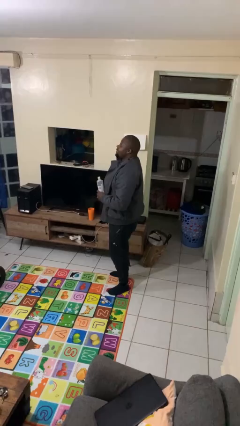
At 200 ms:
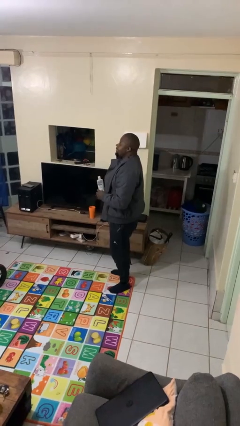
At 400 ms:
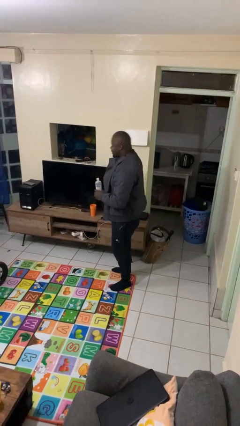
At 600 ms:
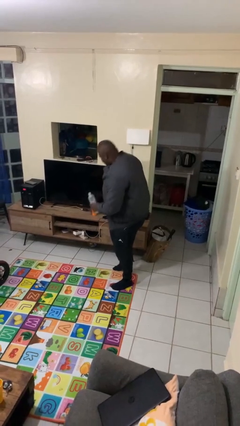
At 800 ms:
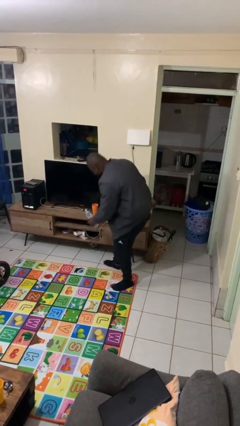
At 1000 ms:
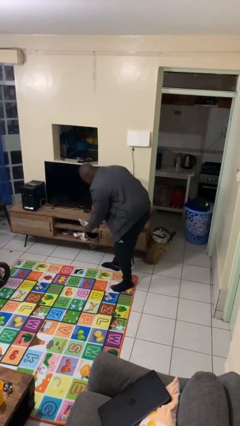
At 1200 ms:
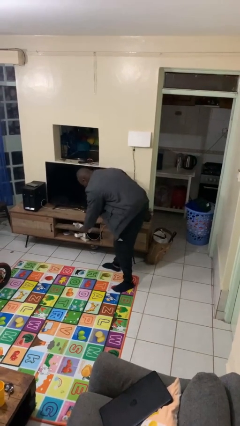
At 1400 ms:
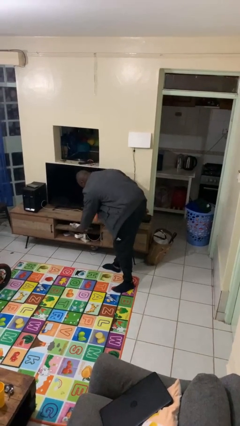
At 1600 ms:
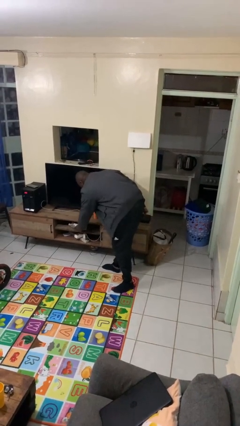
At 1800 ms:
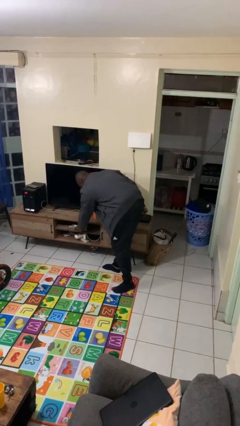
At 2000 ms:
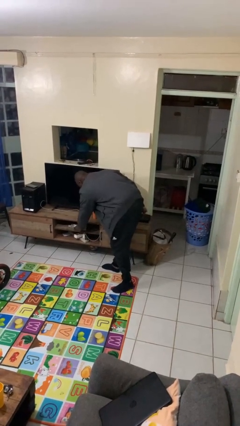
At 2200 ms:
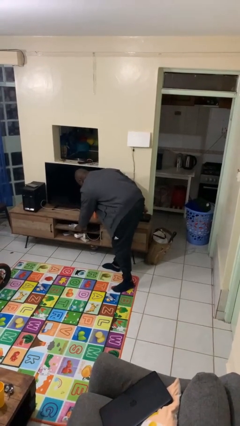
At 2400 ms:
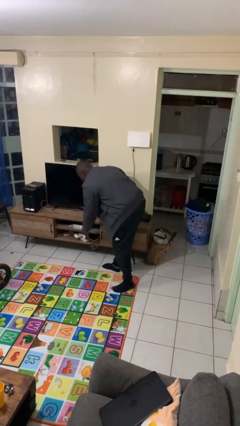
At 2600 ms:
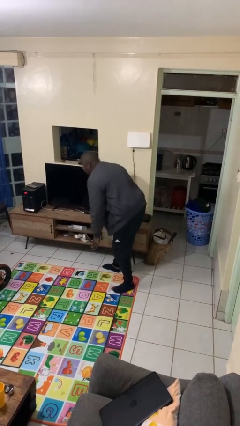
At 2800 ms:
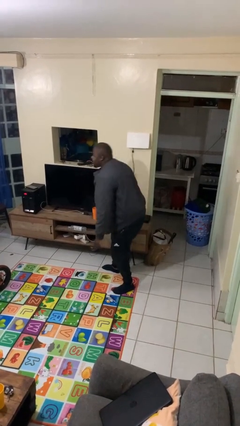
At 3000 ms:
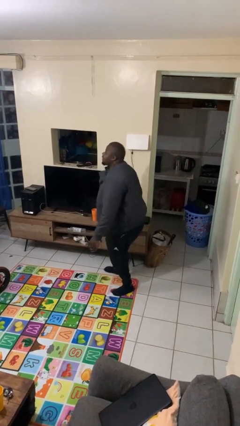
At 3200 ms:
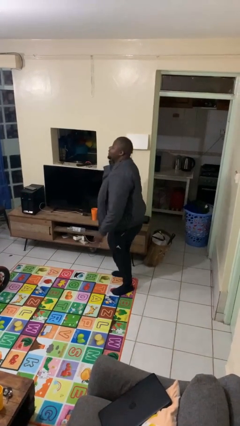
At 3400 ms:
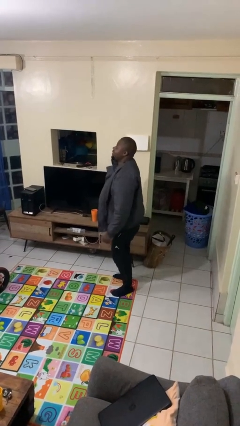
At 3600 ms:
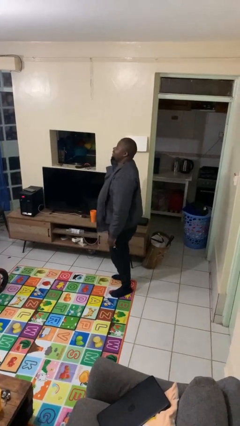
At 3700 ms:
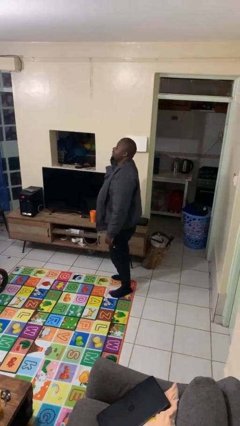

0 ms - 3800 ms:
person puts down object into cabinet

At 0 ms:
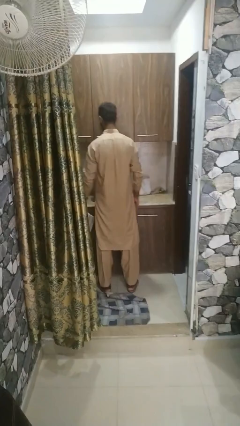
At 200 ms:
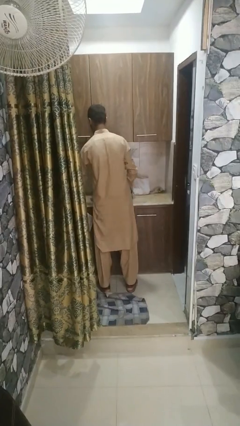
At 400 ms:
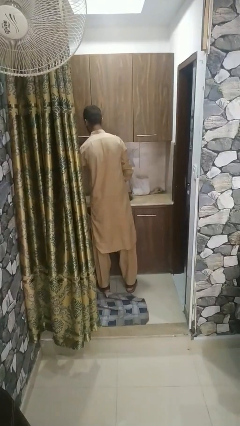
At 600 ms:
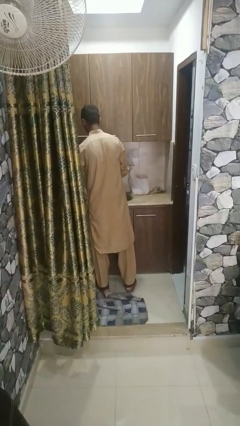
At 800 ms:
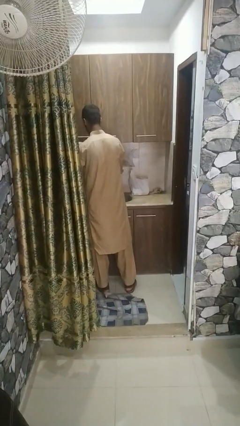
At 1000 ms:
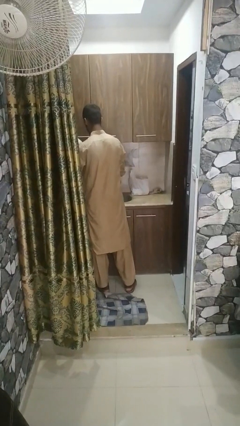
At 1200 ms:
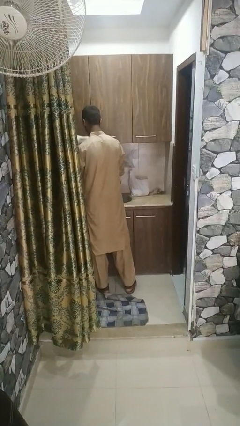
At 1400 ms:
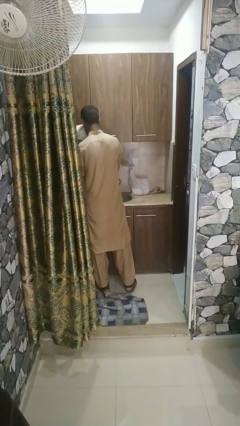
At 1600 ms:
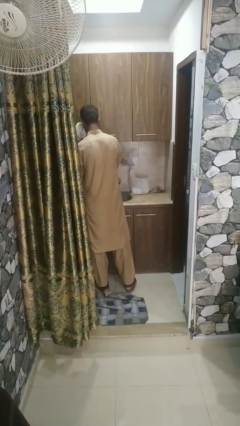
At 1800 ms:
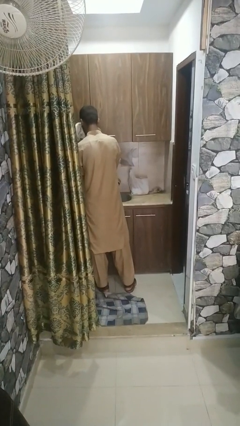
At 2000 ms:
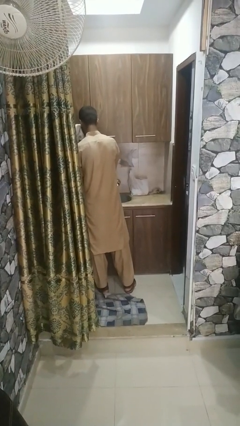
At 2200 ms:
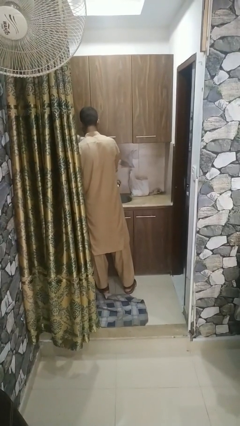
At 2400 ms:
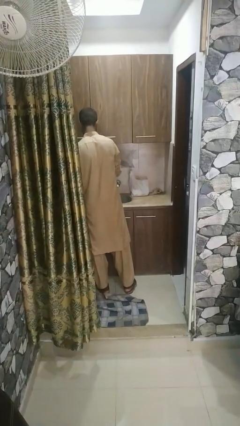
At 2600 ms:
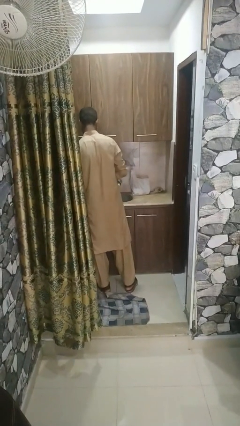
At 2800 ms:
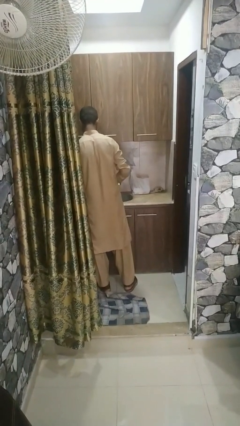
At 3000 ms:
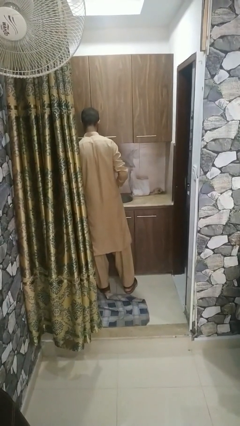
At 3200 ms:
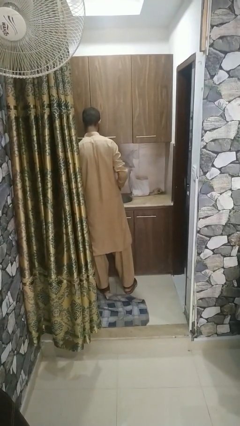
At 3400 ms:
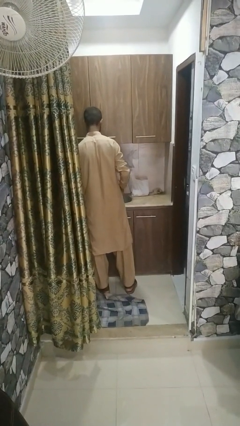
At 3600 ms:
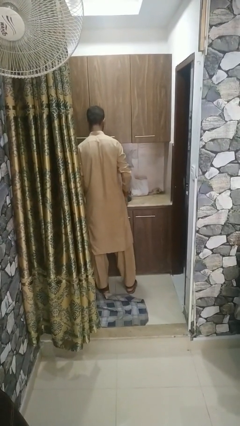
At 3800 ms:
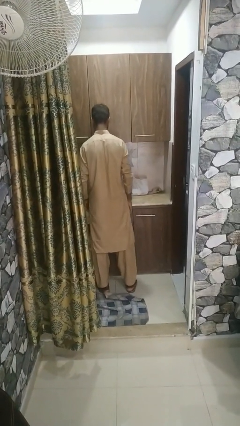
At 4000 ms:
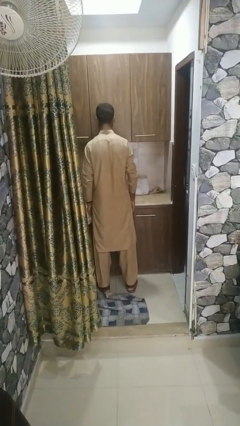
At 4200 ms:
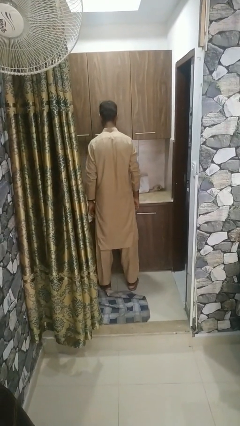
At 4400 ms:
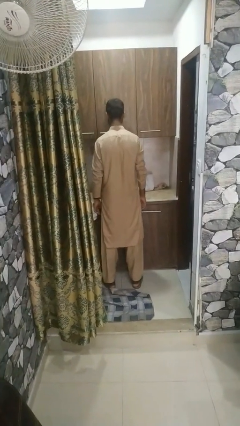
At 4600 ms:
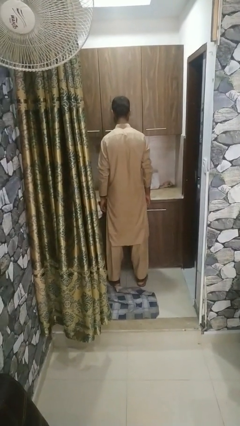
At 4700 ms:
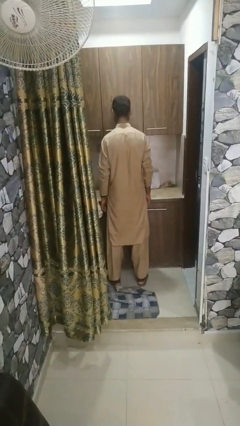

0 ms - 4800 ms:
person dries face with towel

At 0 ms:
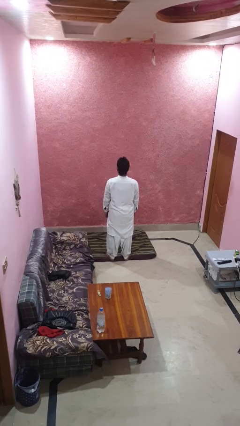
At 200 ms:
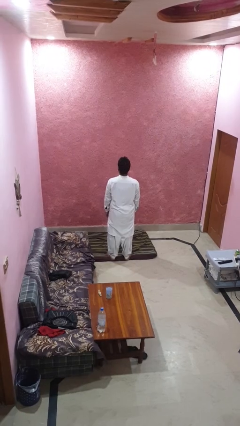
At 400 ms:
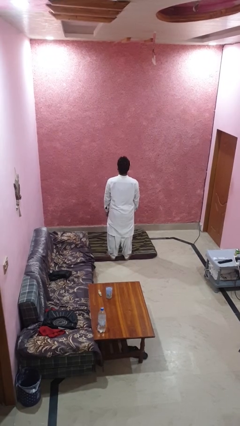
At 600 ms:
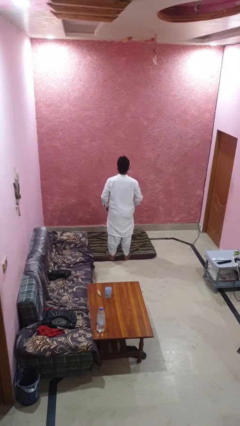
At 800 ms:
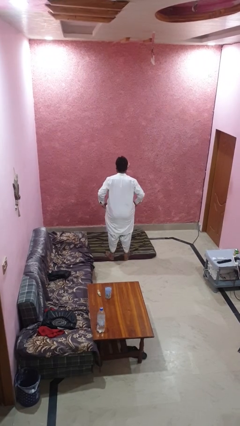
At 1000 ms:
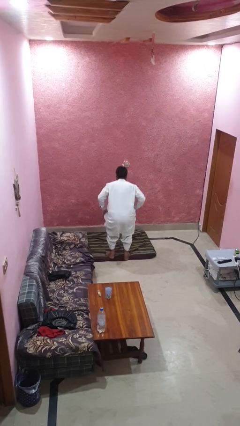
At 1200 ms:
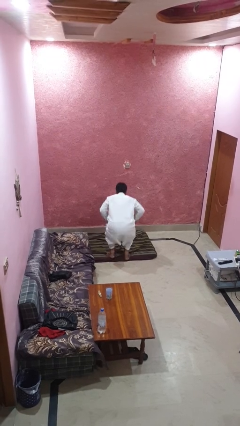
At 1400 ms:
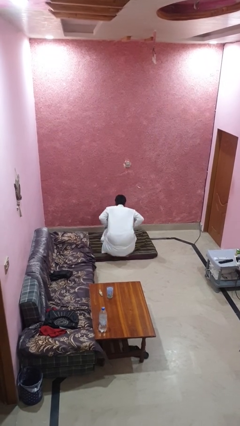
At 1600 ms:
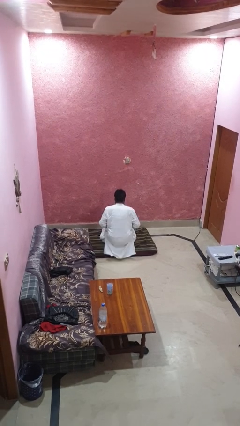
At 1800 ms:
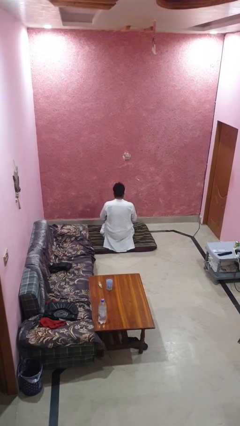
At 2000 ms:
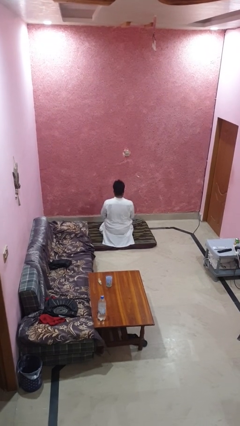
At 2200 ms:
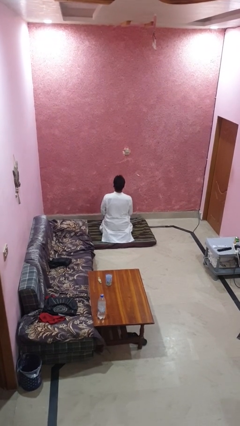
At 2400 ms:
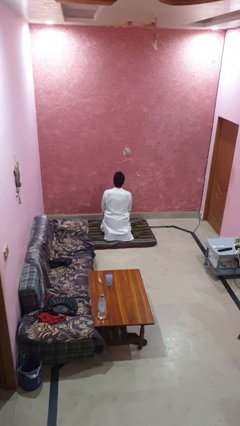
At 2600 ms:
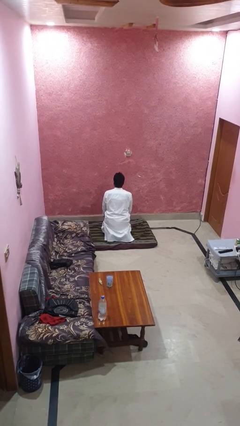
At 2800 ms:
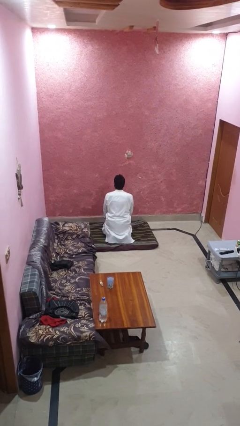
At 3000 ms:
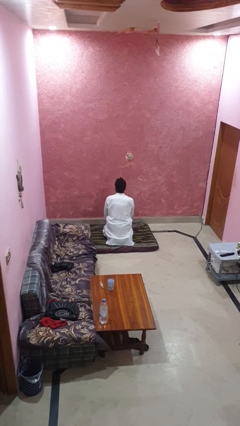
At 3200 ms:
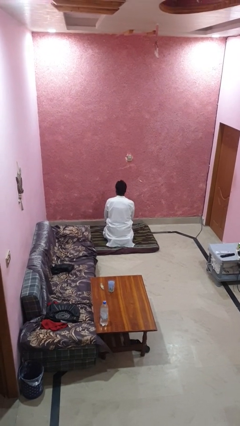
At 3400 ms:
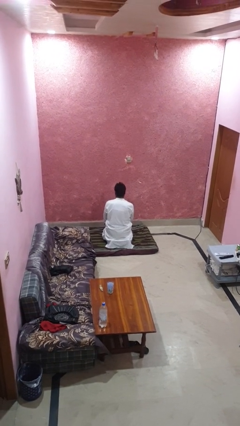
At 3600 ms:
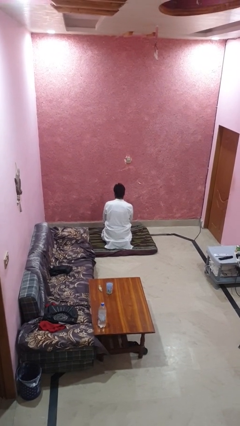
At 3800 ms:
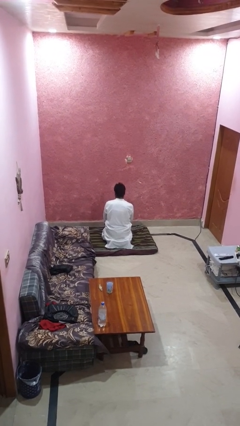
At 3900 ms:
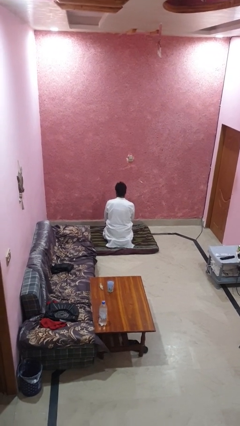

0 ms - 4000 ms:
person kneels

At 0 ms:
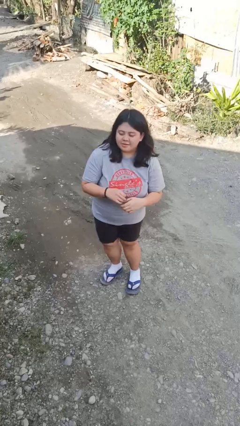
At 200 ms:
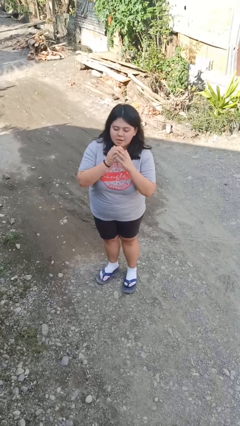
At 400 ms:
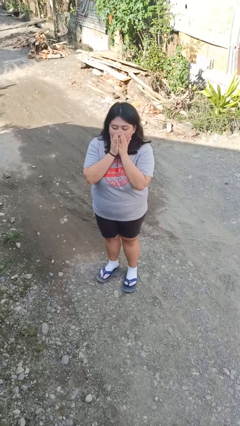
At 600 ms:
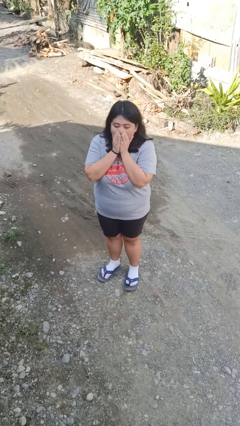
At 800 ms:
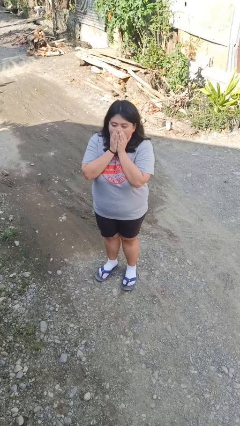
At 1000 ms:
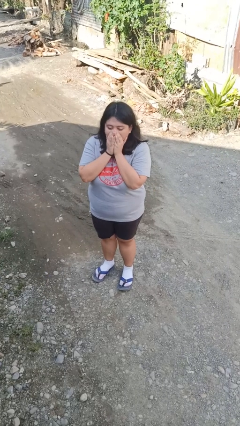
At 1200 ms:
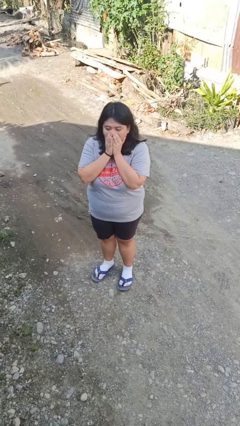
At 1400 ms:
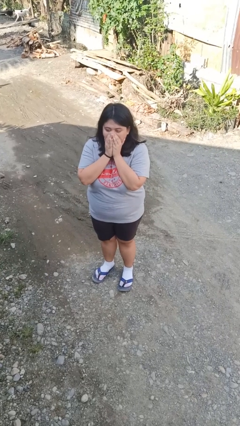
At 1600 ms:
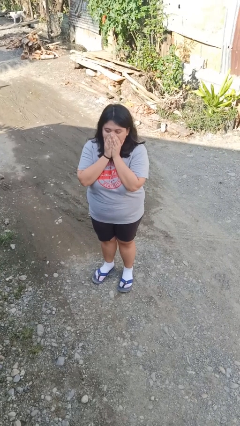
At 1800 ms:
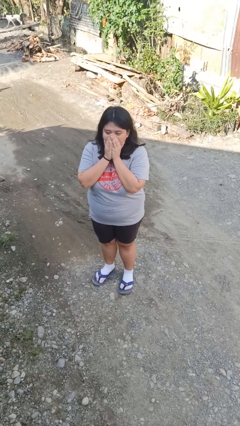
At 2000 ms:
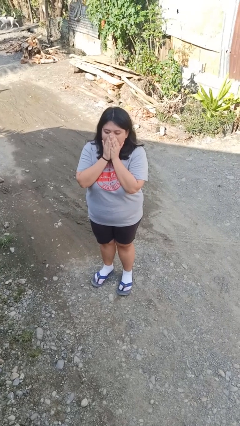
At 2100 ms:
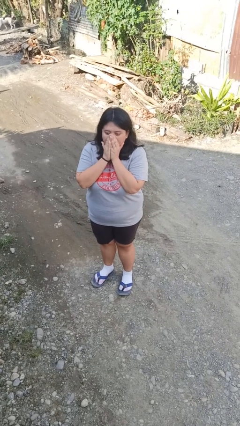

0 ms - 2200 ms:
person blows into hands

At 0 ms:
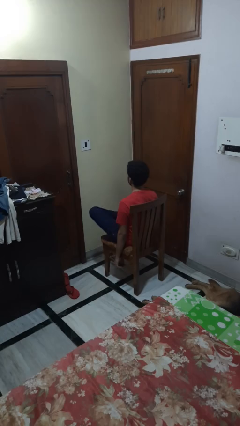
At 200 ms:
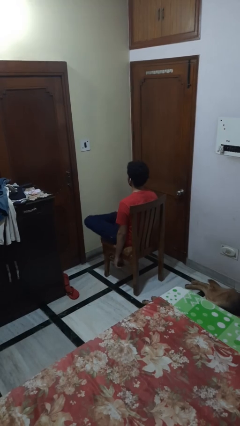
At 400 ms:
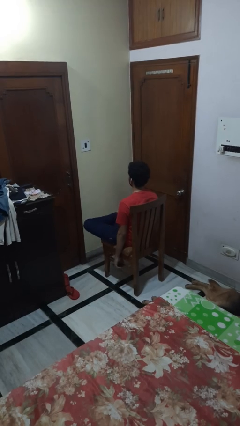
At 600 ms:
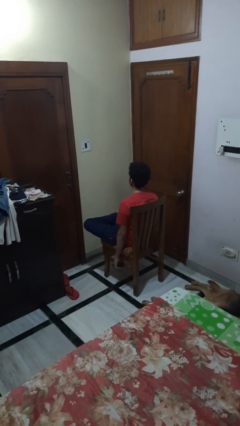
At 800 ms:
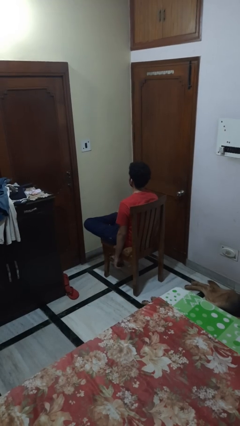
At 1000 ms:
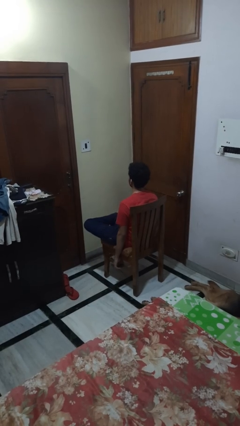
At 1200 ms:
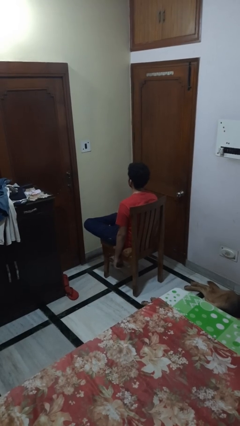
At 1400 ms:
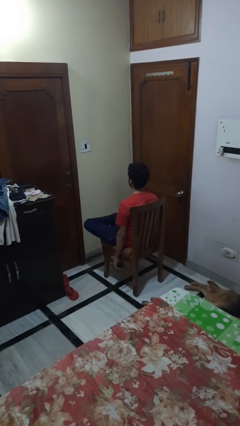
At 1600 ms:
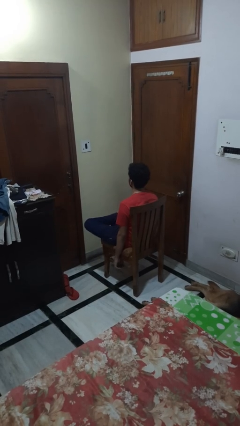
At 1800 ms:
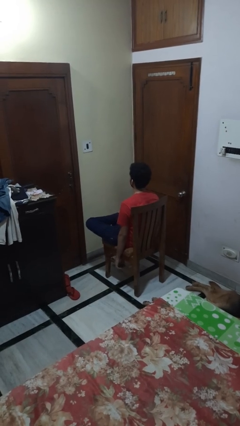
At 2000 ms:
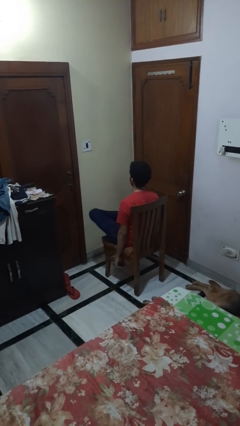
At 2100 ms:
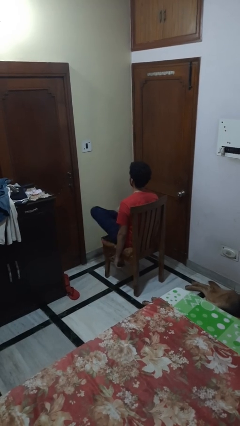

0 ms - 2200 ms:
person crosses legs

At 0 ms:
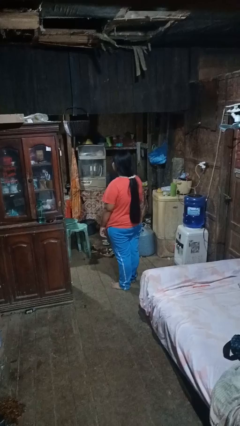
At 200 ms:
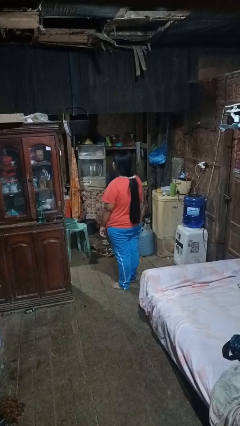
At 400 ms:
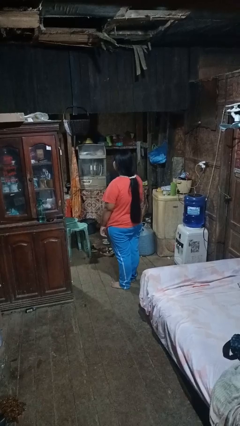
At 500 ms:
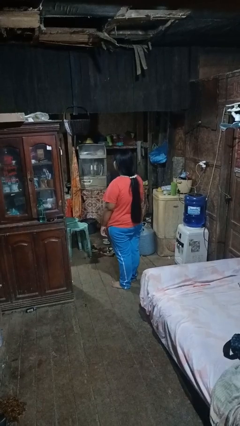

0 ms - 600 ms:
person yawns
